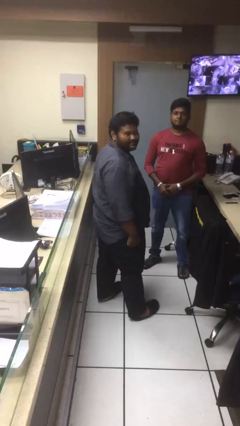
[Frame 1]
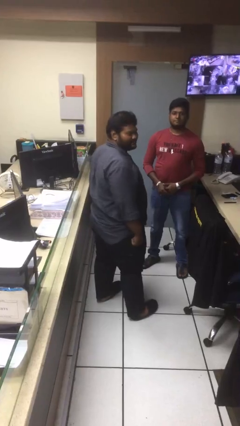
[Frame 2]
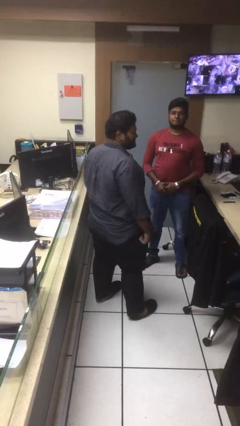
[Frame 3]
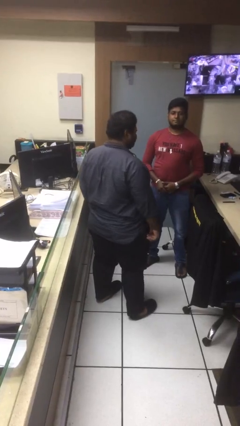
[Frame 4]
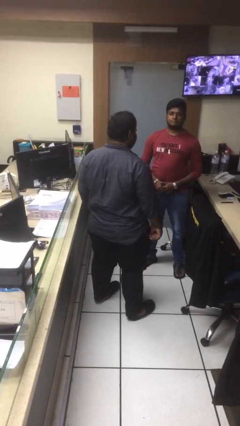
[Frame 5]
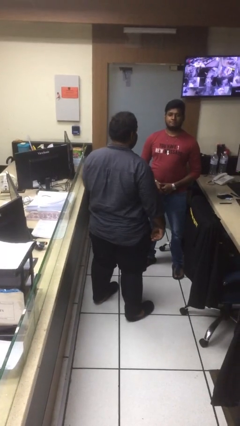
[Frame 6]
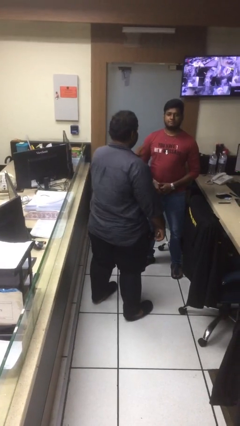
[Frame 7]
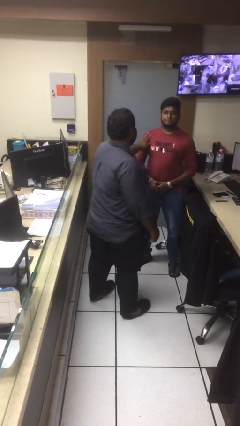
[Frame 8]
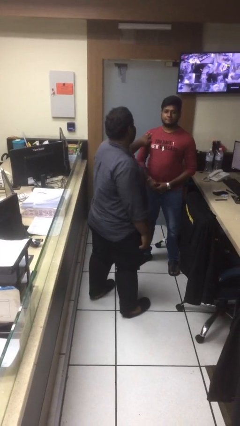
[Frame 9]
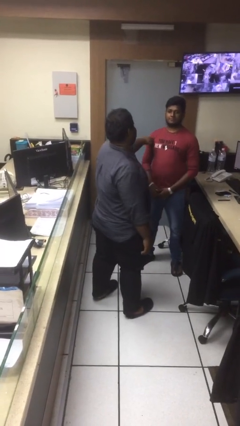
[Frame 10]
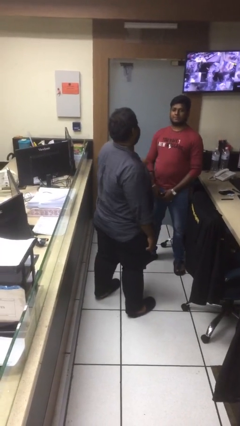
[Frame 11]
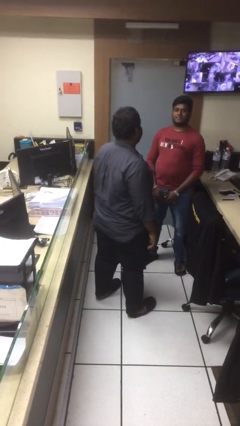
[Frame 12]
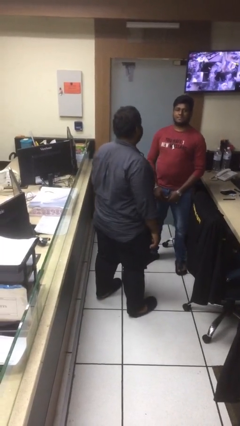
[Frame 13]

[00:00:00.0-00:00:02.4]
person shoves person

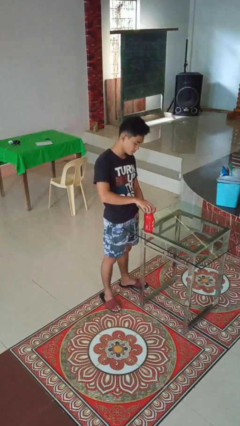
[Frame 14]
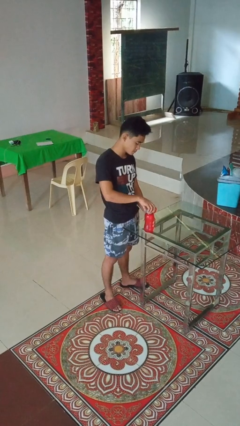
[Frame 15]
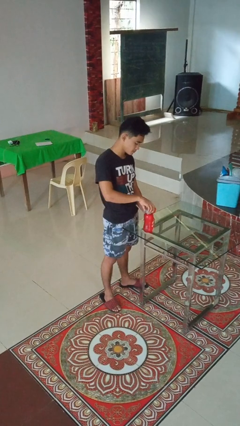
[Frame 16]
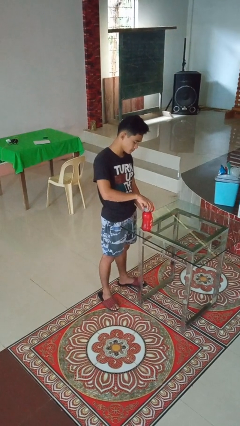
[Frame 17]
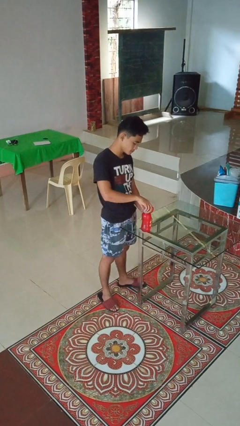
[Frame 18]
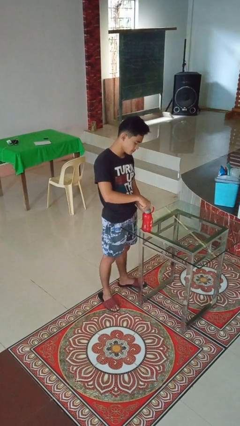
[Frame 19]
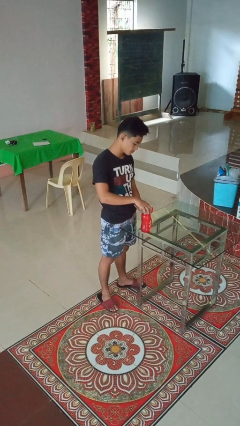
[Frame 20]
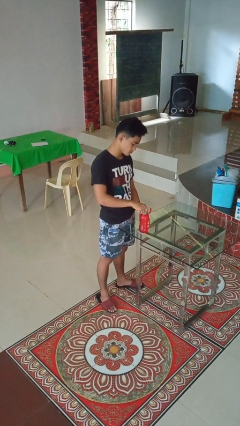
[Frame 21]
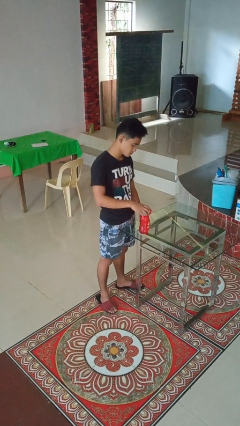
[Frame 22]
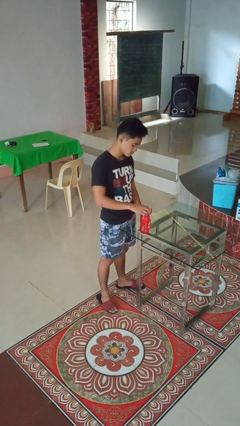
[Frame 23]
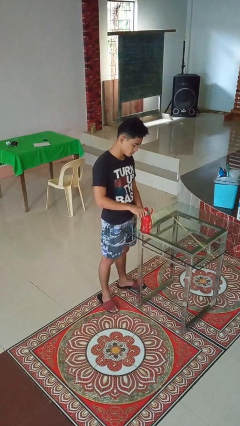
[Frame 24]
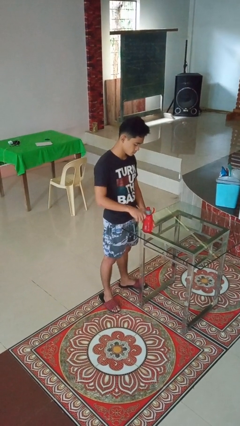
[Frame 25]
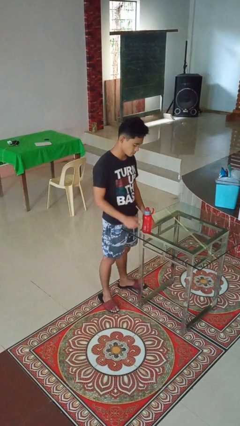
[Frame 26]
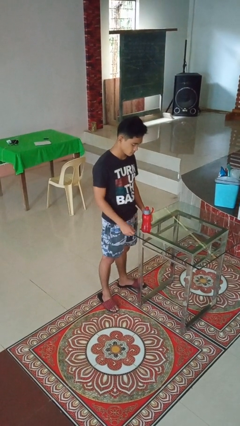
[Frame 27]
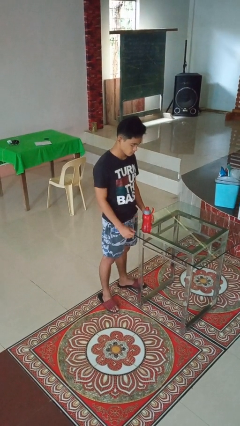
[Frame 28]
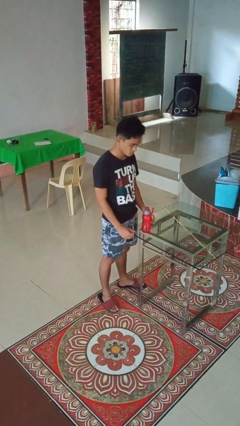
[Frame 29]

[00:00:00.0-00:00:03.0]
person screws lid to bottle

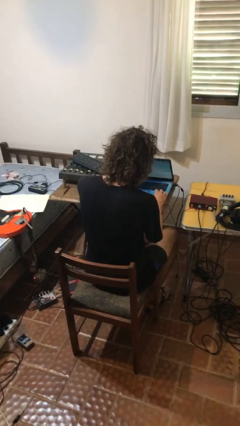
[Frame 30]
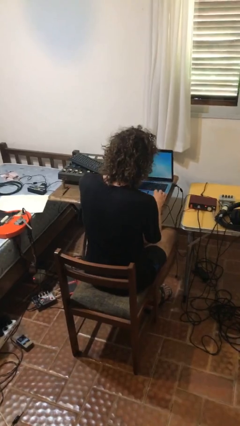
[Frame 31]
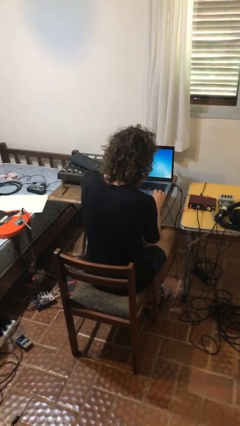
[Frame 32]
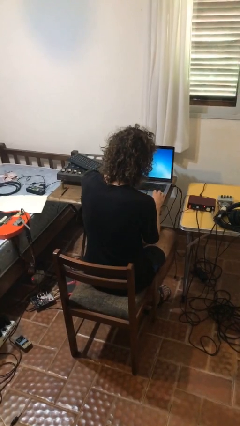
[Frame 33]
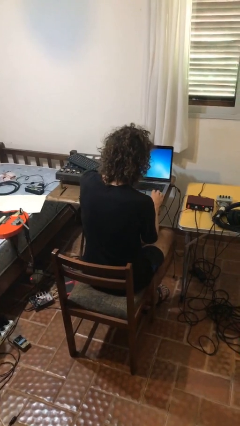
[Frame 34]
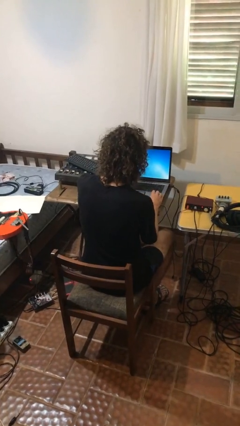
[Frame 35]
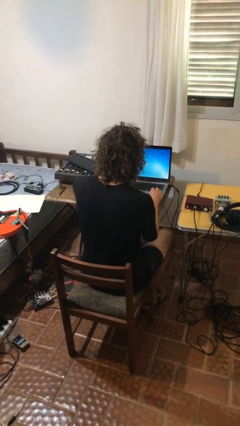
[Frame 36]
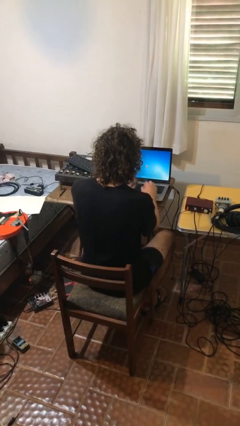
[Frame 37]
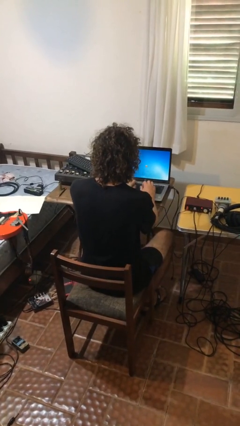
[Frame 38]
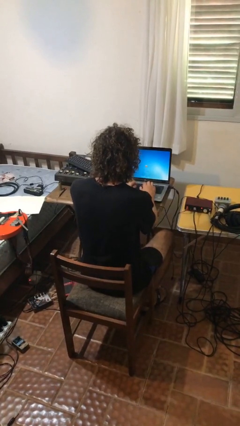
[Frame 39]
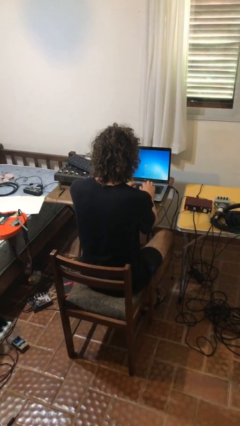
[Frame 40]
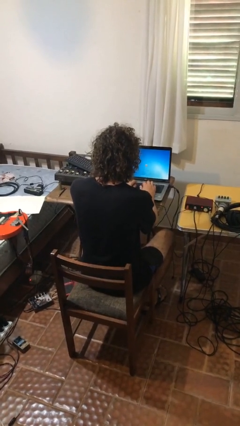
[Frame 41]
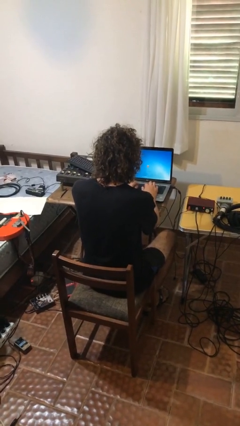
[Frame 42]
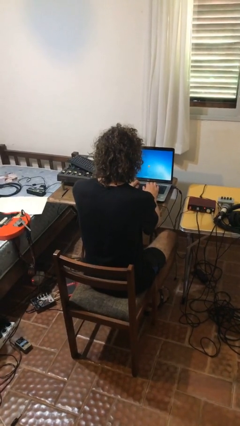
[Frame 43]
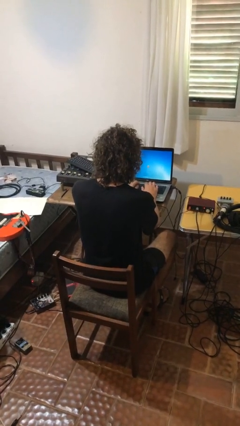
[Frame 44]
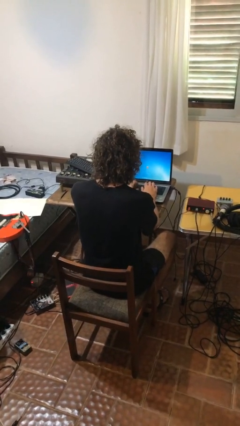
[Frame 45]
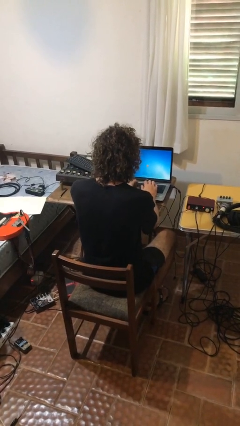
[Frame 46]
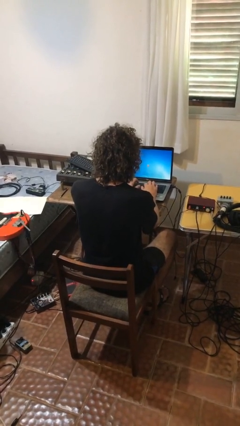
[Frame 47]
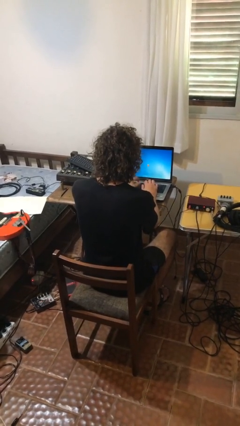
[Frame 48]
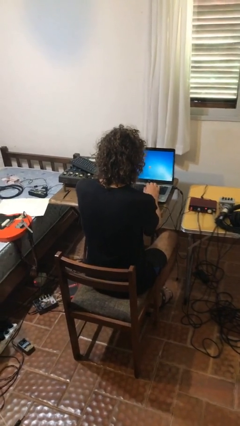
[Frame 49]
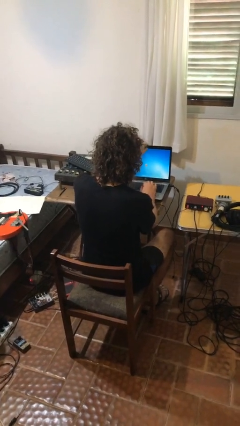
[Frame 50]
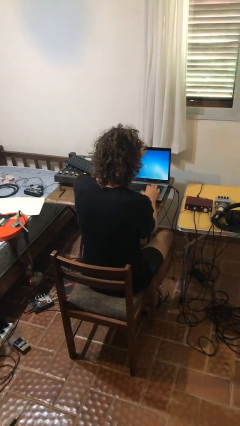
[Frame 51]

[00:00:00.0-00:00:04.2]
person interacts with laptop

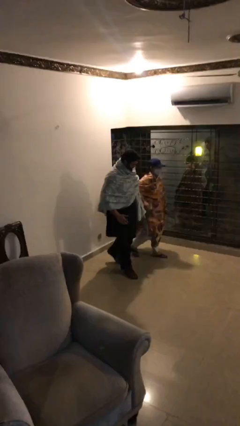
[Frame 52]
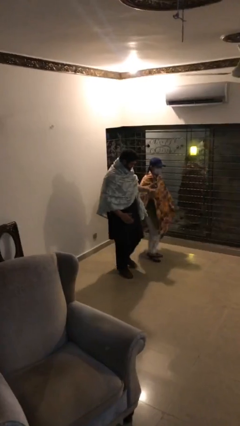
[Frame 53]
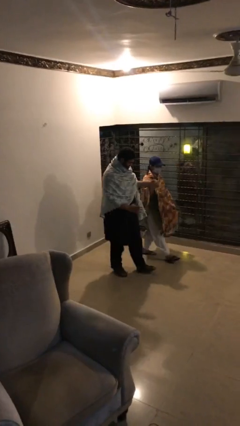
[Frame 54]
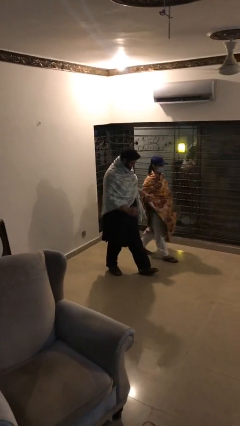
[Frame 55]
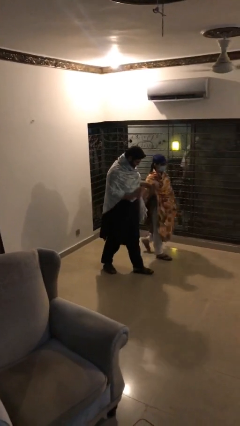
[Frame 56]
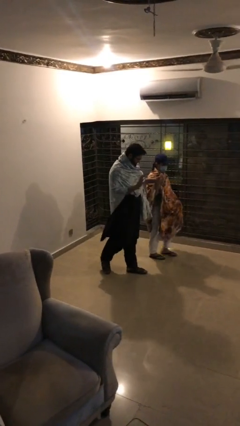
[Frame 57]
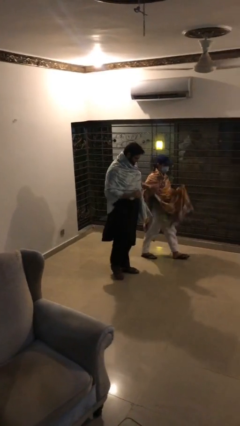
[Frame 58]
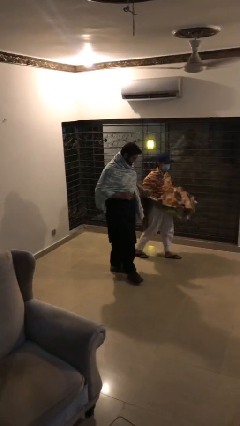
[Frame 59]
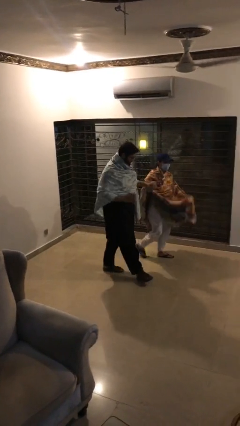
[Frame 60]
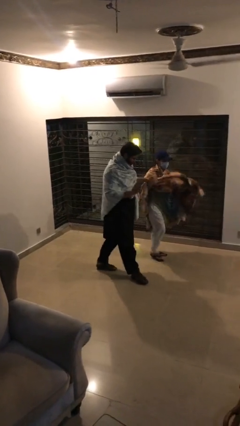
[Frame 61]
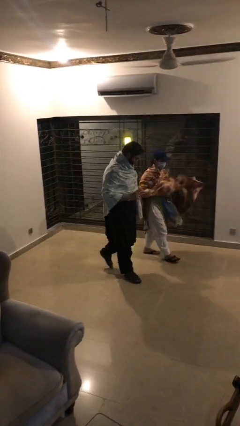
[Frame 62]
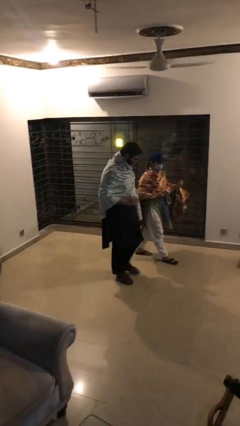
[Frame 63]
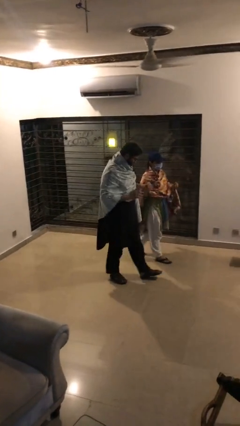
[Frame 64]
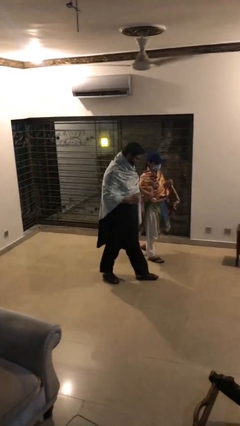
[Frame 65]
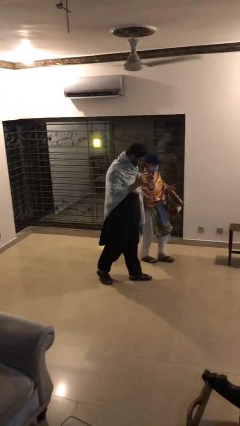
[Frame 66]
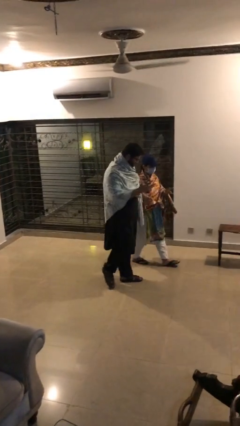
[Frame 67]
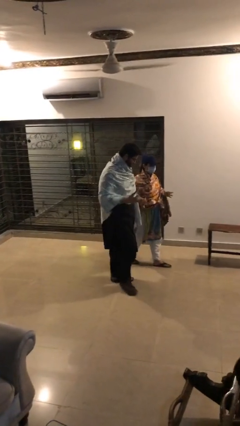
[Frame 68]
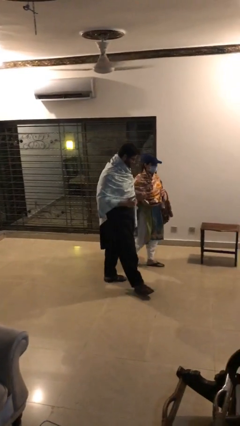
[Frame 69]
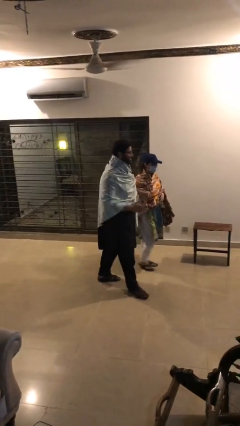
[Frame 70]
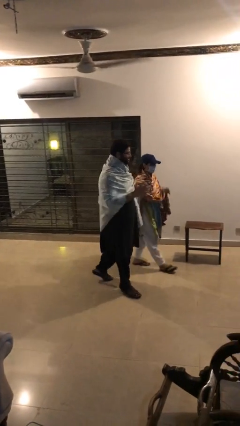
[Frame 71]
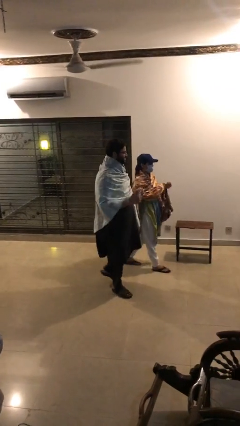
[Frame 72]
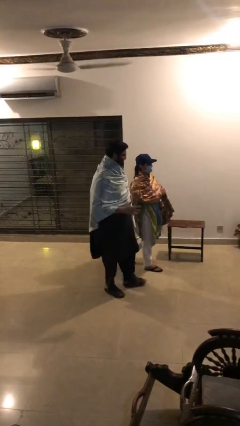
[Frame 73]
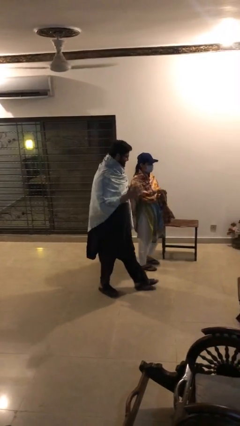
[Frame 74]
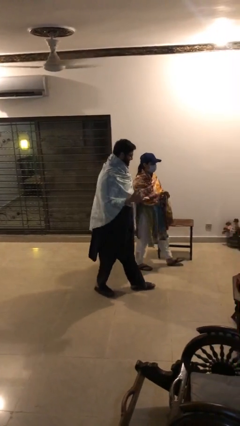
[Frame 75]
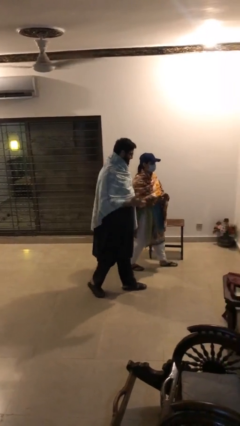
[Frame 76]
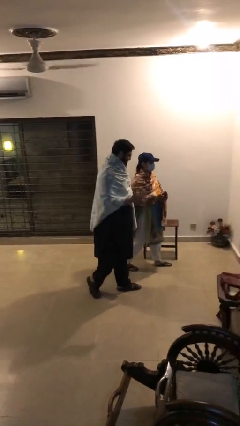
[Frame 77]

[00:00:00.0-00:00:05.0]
person holds hand

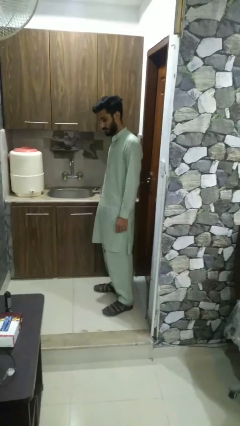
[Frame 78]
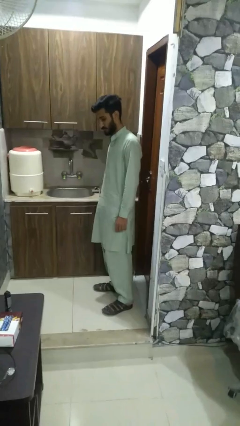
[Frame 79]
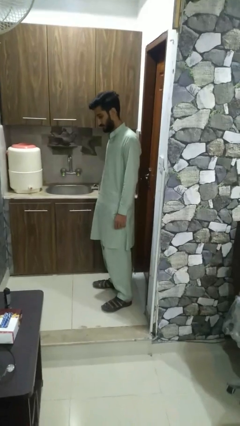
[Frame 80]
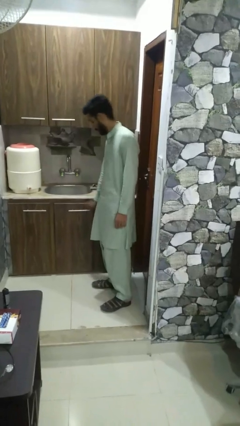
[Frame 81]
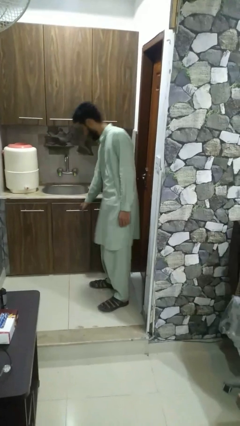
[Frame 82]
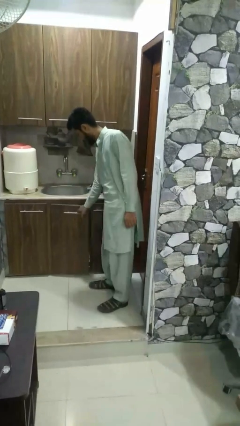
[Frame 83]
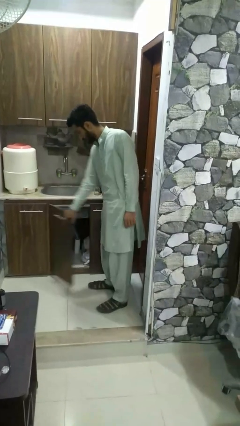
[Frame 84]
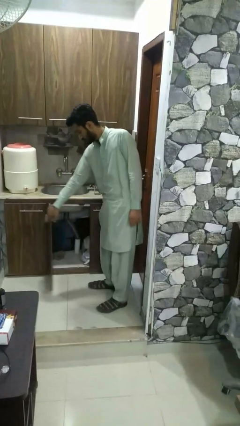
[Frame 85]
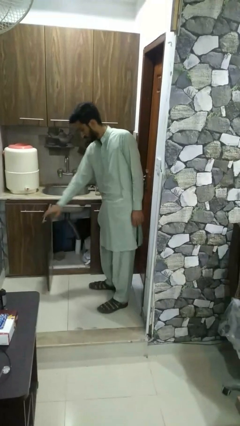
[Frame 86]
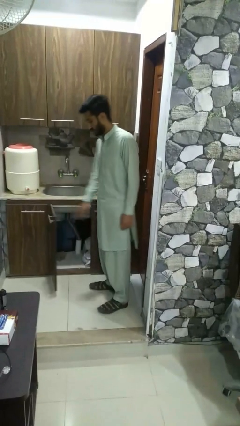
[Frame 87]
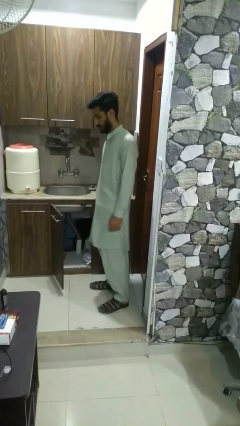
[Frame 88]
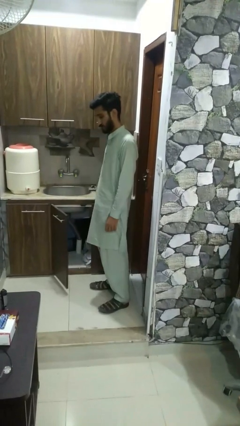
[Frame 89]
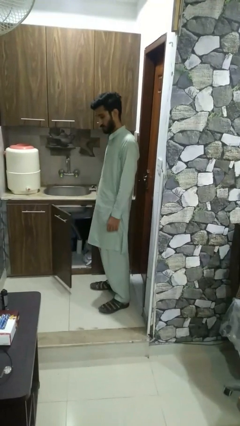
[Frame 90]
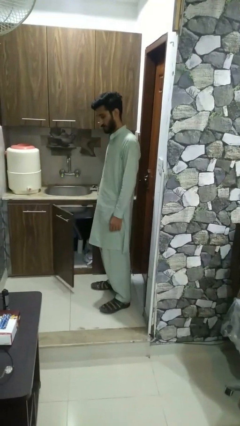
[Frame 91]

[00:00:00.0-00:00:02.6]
person opens closet door

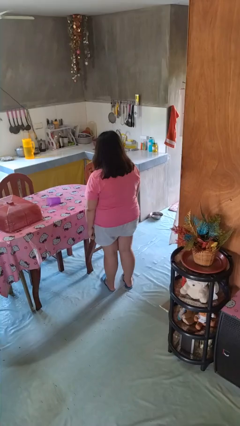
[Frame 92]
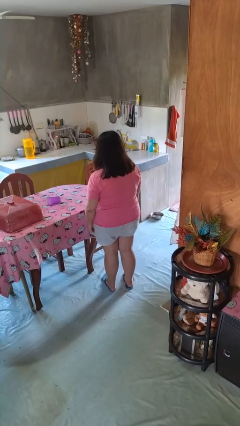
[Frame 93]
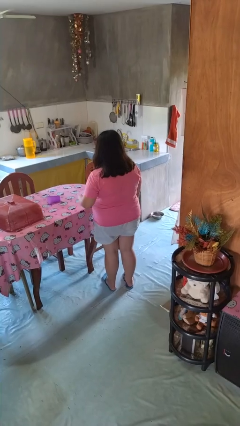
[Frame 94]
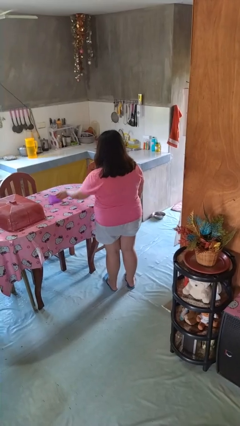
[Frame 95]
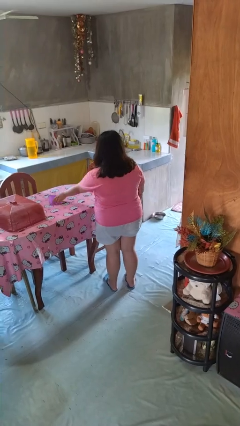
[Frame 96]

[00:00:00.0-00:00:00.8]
person sets upright glass
